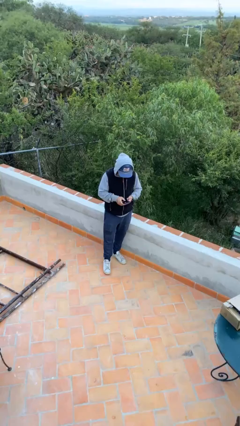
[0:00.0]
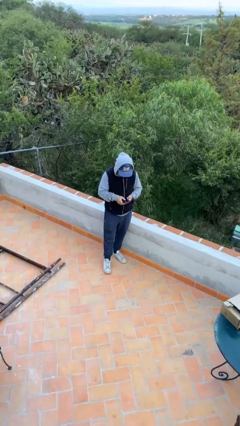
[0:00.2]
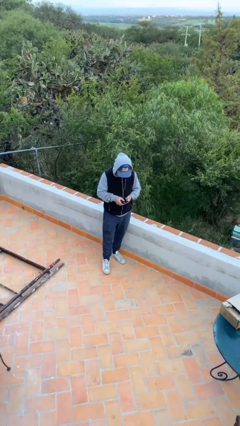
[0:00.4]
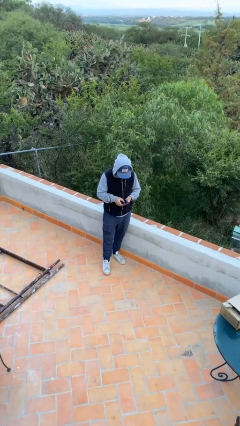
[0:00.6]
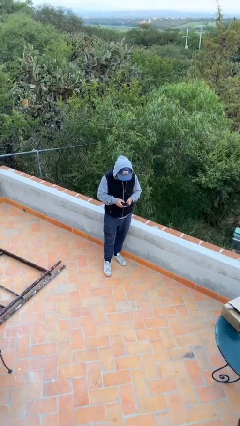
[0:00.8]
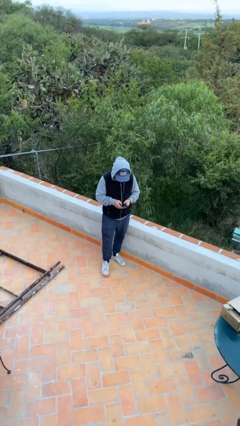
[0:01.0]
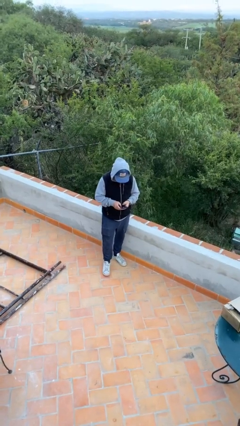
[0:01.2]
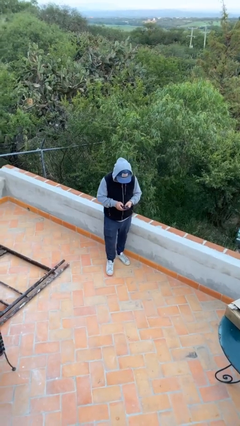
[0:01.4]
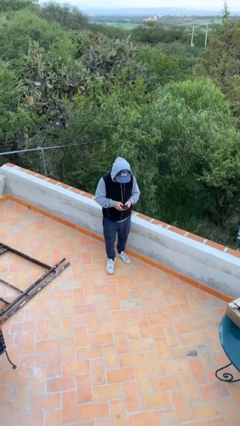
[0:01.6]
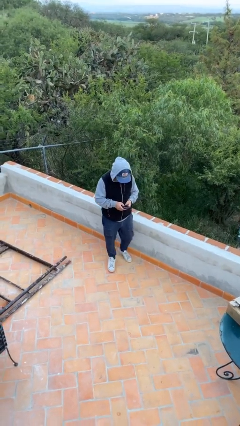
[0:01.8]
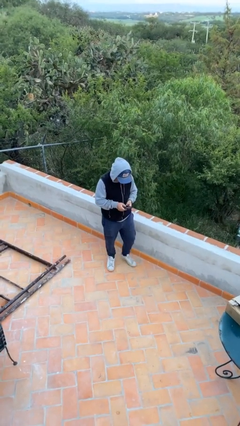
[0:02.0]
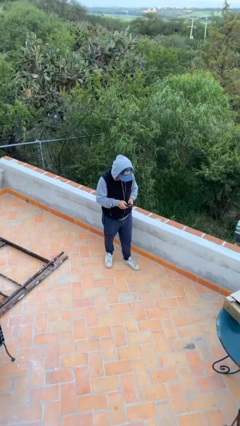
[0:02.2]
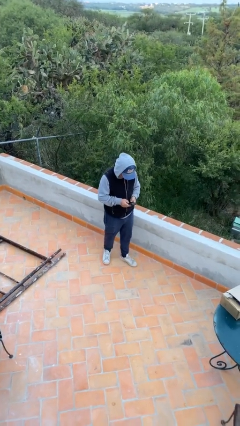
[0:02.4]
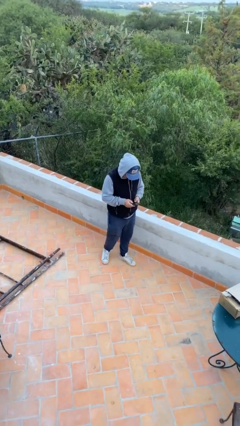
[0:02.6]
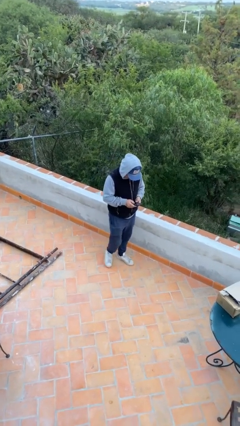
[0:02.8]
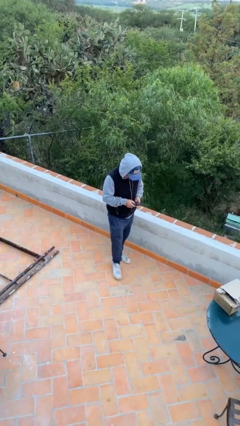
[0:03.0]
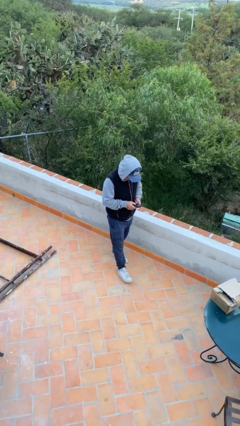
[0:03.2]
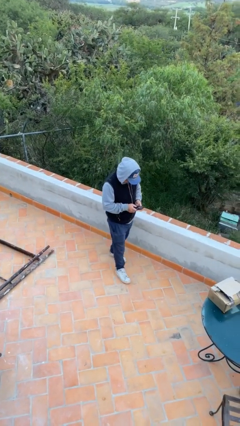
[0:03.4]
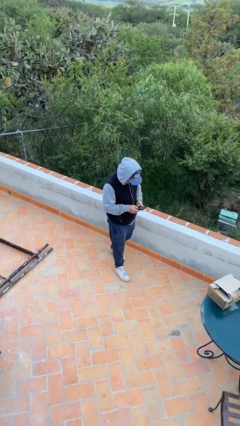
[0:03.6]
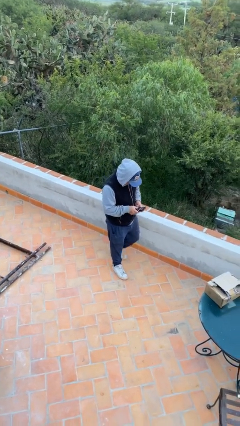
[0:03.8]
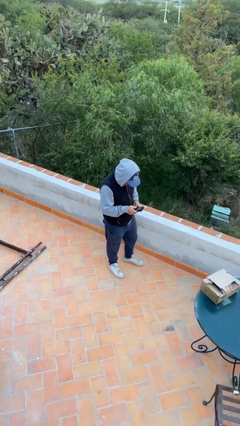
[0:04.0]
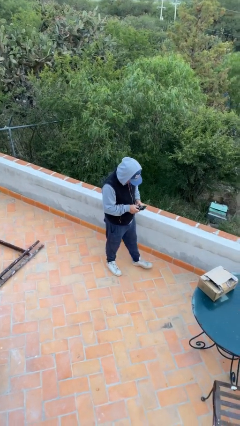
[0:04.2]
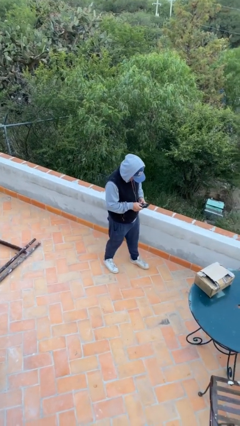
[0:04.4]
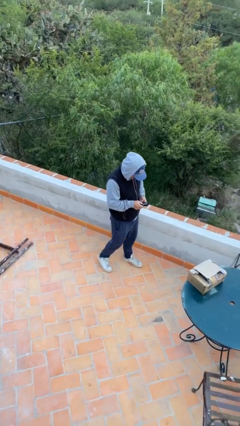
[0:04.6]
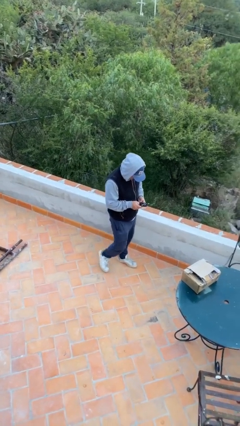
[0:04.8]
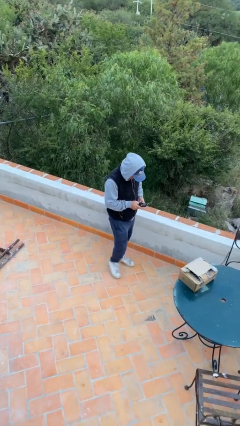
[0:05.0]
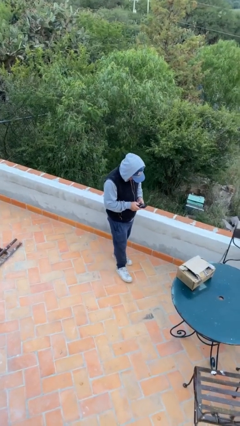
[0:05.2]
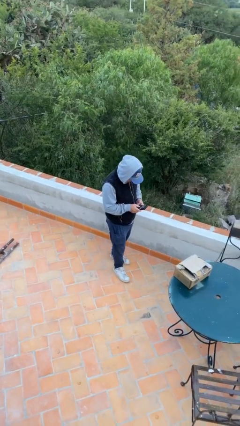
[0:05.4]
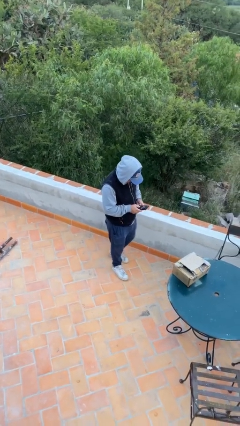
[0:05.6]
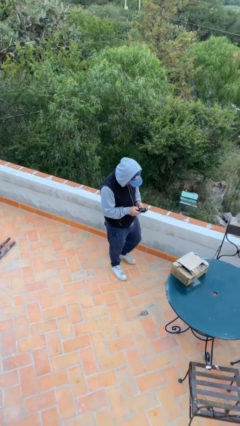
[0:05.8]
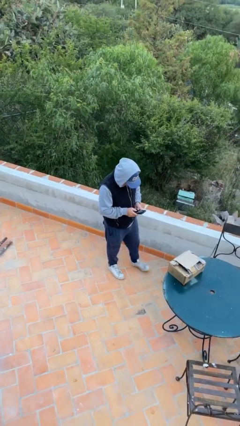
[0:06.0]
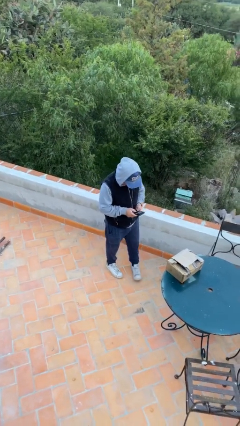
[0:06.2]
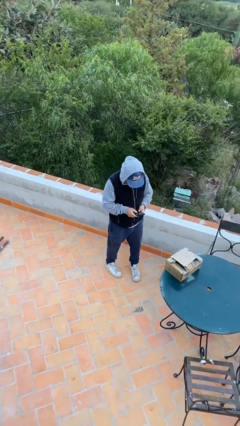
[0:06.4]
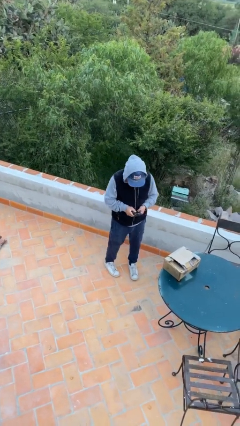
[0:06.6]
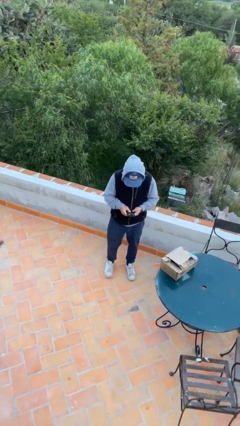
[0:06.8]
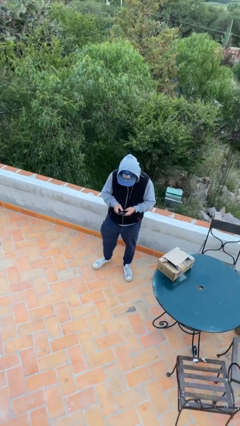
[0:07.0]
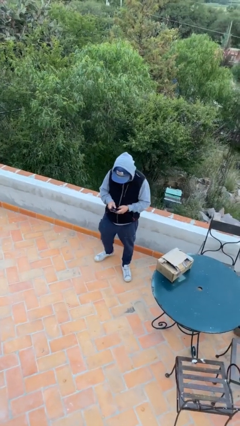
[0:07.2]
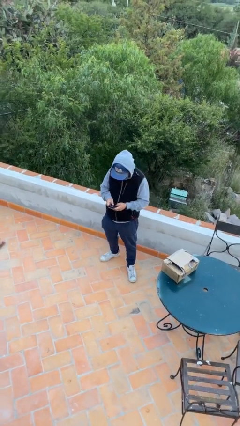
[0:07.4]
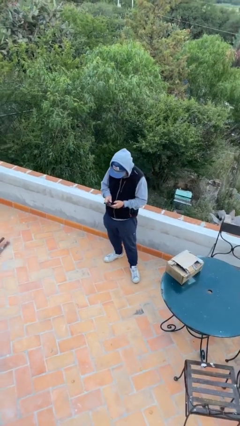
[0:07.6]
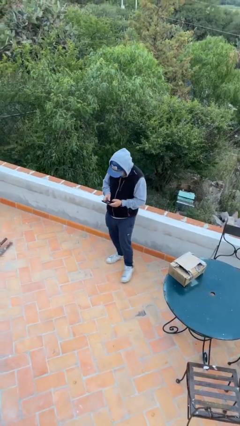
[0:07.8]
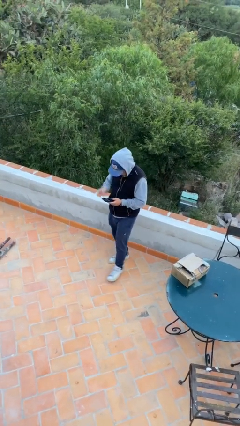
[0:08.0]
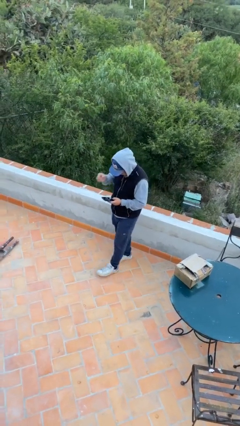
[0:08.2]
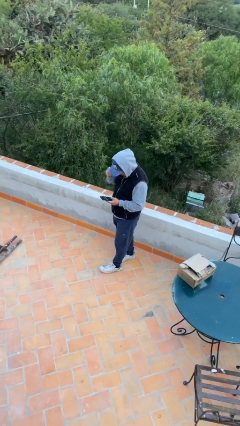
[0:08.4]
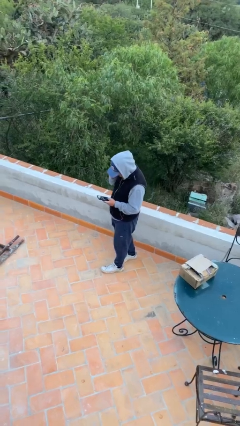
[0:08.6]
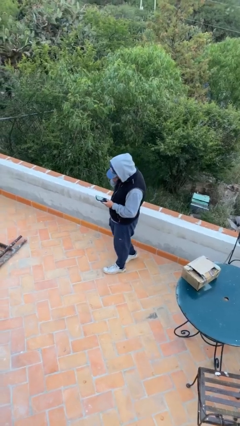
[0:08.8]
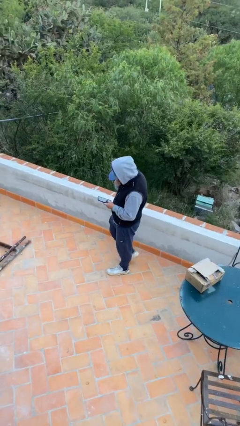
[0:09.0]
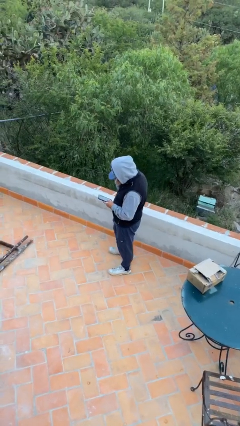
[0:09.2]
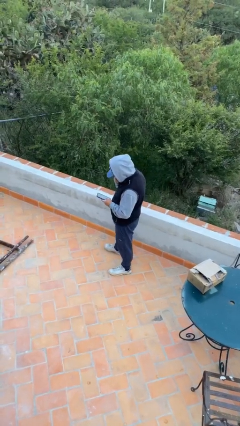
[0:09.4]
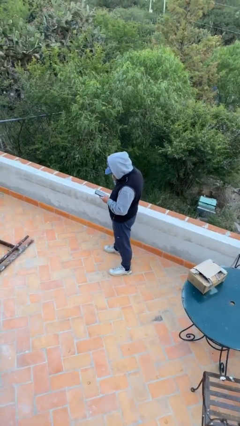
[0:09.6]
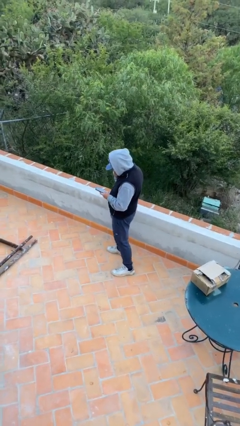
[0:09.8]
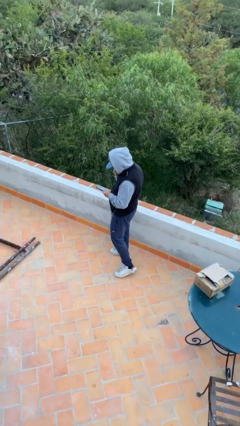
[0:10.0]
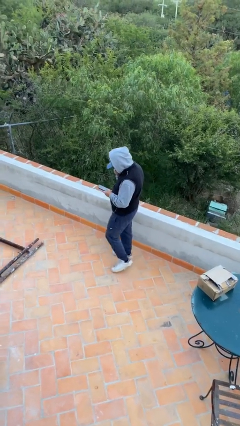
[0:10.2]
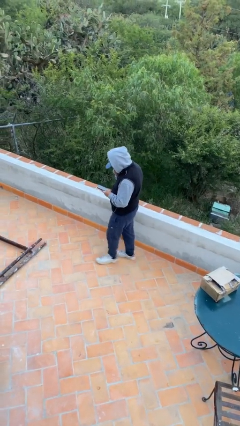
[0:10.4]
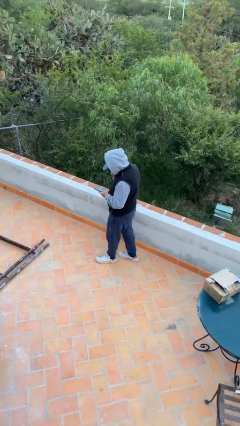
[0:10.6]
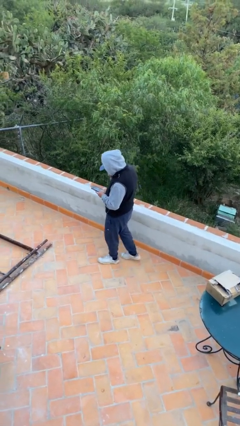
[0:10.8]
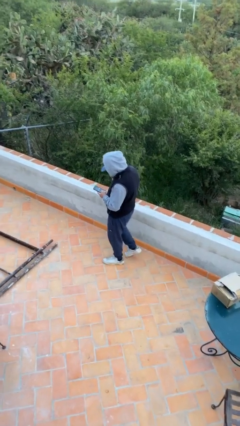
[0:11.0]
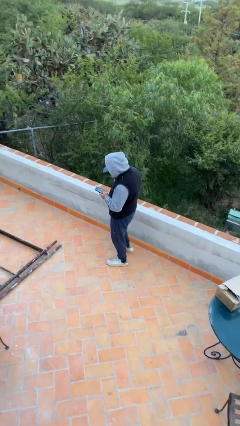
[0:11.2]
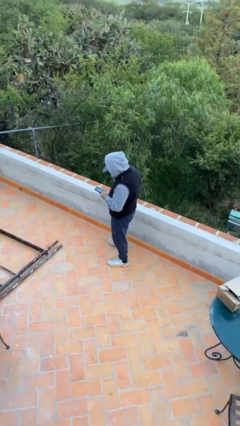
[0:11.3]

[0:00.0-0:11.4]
person texts on phone

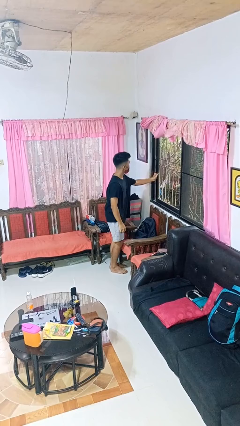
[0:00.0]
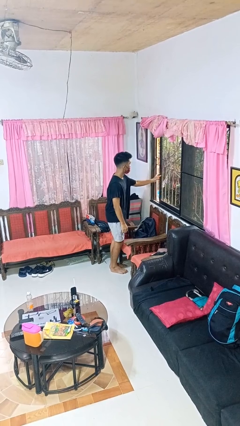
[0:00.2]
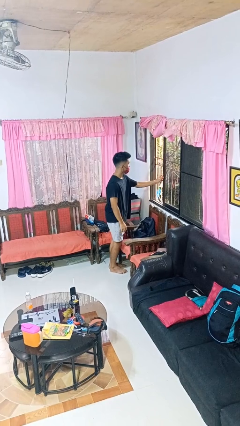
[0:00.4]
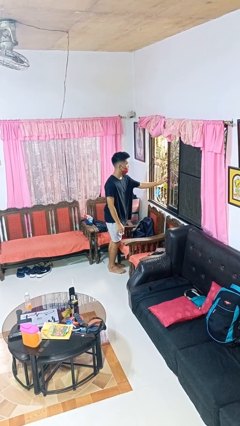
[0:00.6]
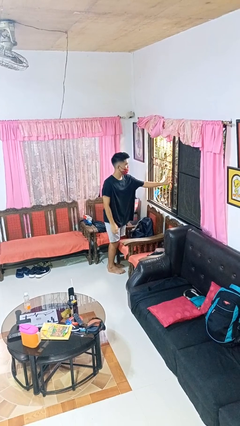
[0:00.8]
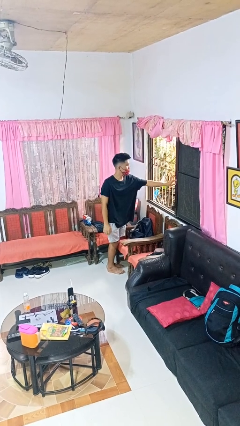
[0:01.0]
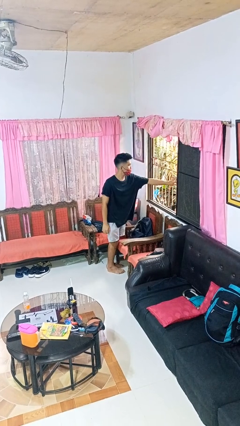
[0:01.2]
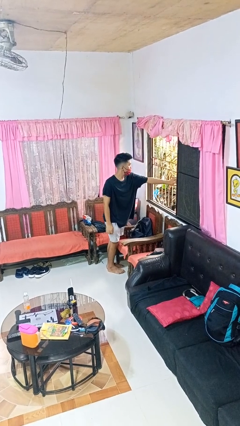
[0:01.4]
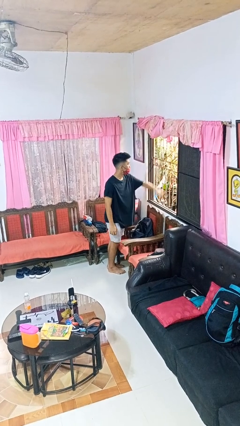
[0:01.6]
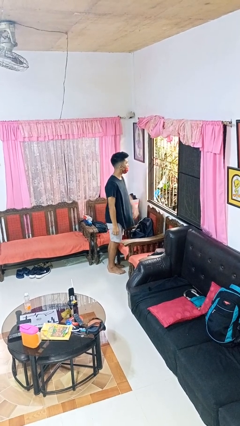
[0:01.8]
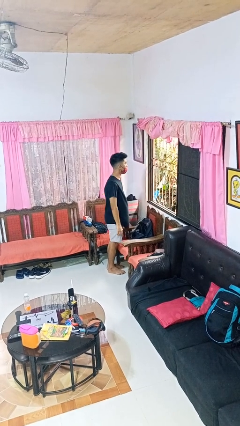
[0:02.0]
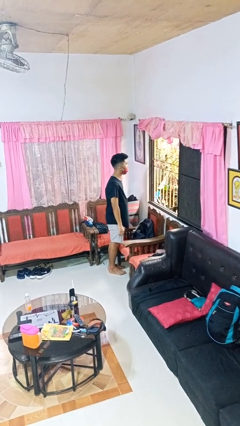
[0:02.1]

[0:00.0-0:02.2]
person opens home window

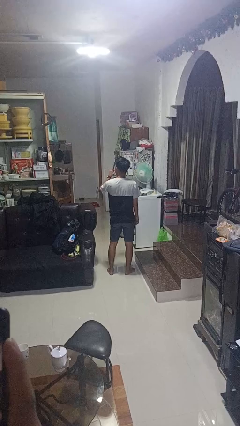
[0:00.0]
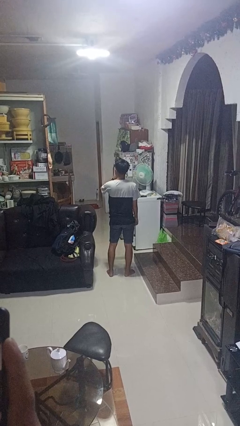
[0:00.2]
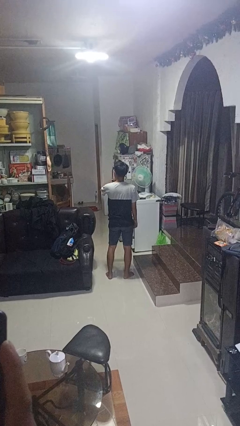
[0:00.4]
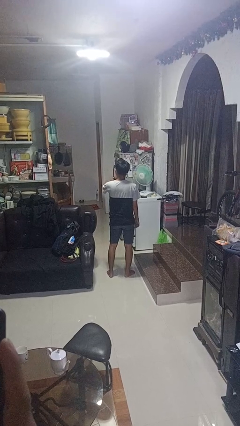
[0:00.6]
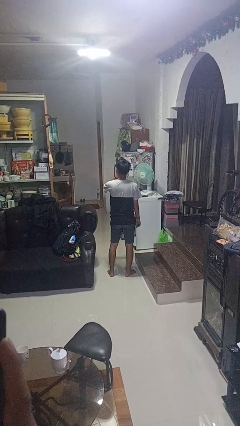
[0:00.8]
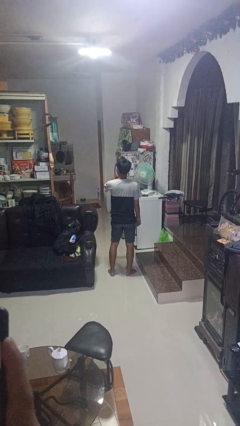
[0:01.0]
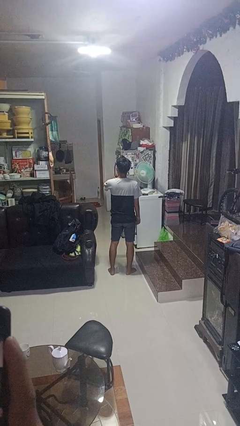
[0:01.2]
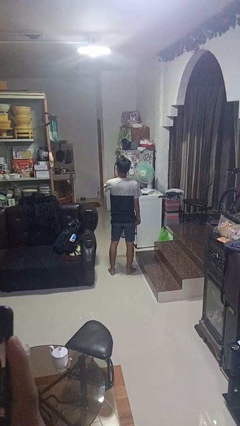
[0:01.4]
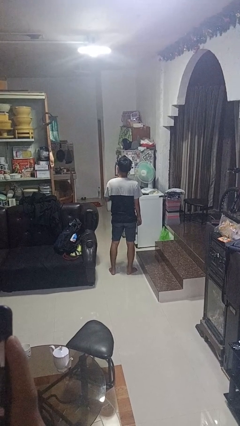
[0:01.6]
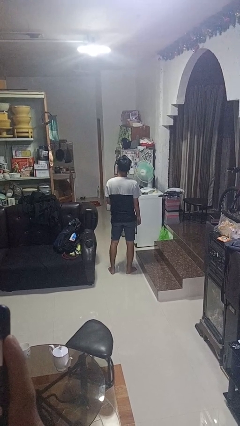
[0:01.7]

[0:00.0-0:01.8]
person gestures be quiet

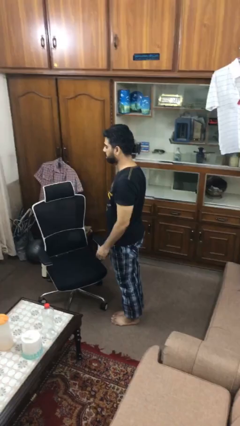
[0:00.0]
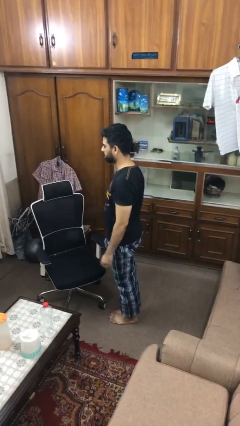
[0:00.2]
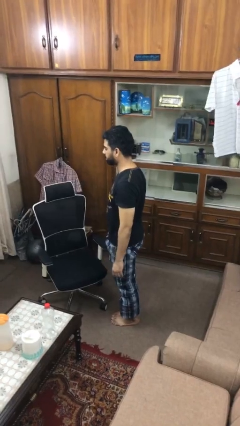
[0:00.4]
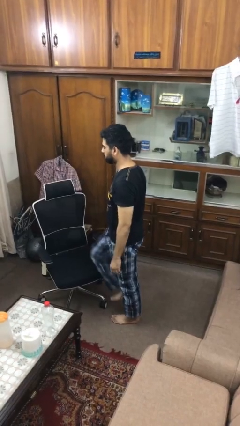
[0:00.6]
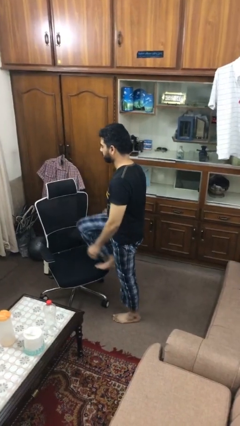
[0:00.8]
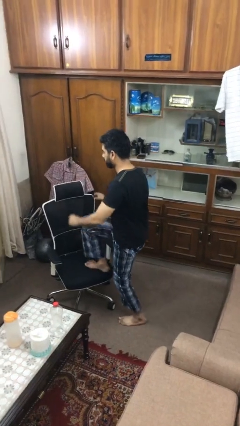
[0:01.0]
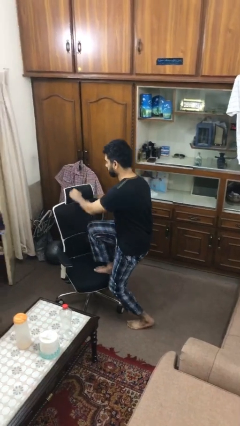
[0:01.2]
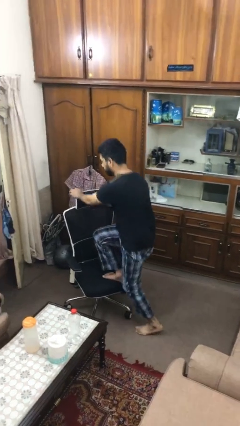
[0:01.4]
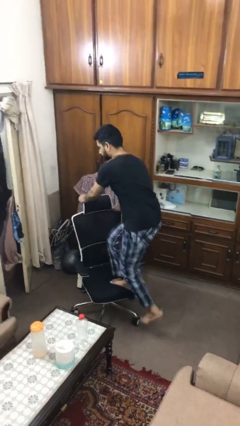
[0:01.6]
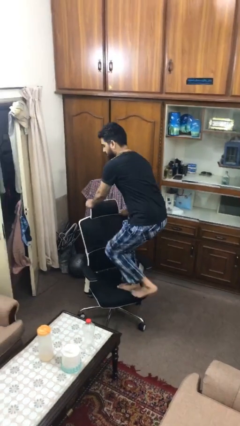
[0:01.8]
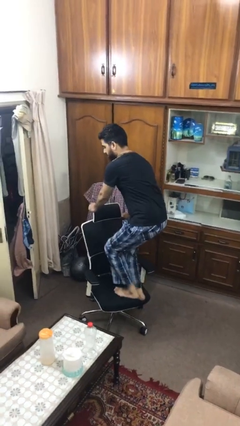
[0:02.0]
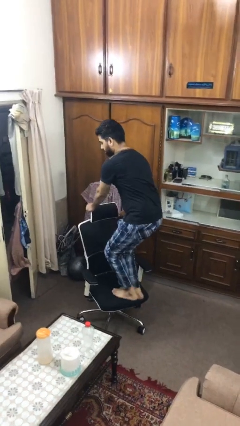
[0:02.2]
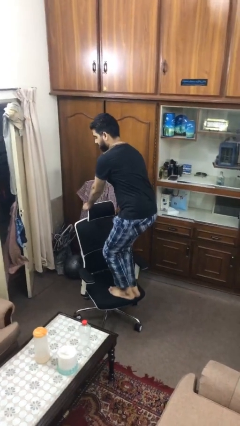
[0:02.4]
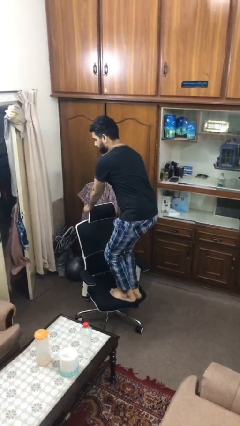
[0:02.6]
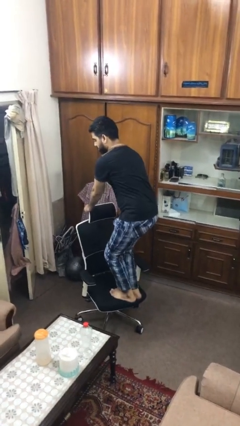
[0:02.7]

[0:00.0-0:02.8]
person climbs on chair
